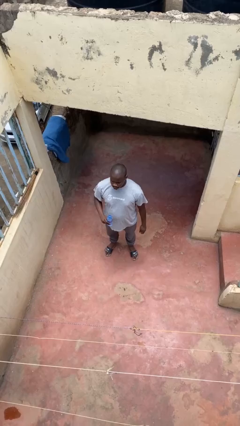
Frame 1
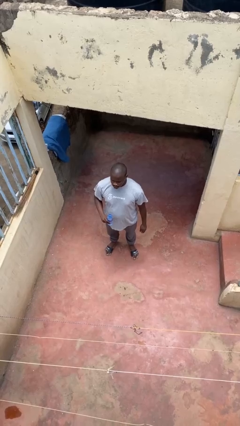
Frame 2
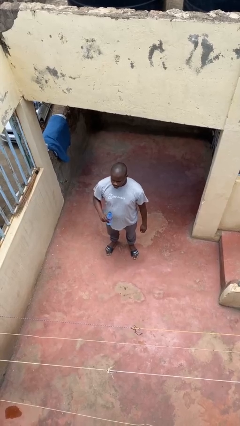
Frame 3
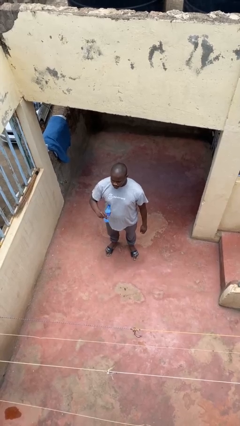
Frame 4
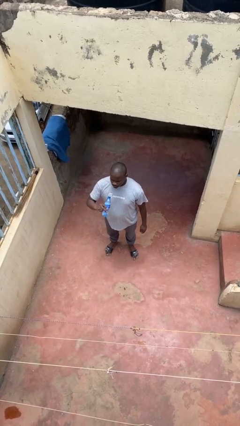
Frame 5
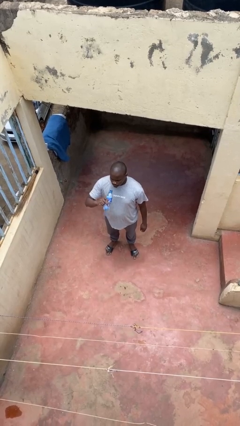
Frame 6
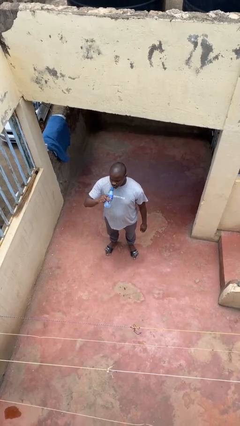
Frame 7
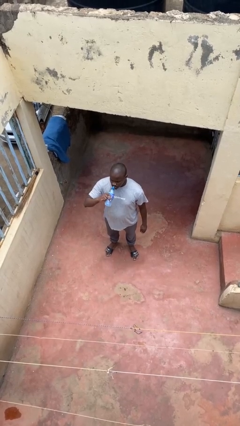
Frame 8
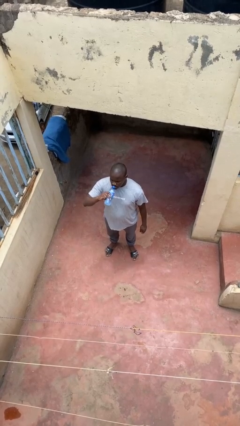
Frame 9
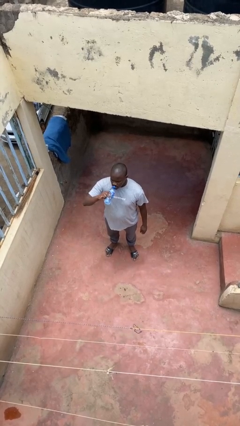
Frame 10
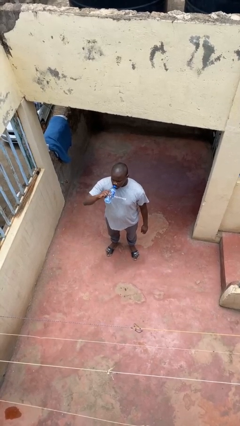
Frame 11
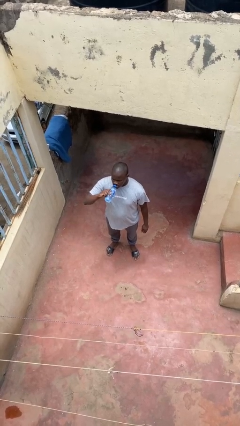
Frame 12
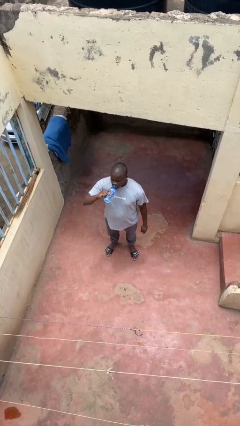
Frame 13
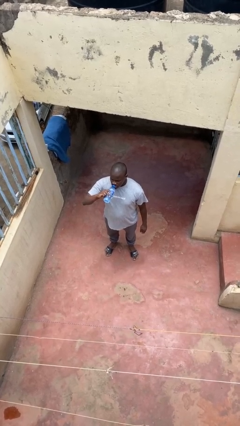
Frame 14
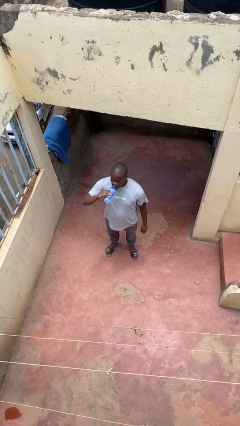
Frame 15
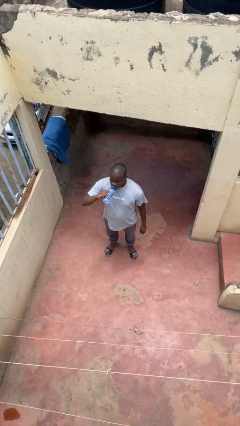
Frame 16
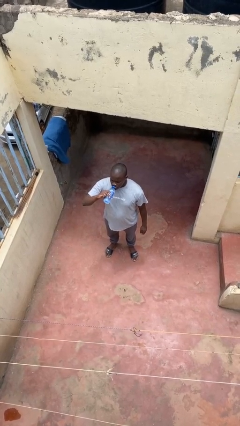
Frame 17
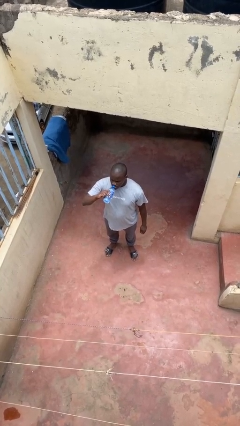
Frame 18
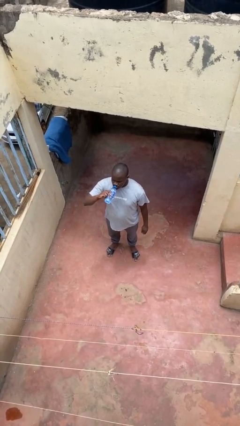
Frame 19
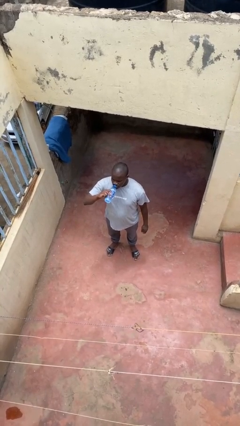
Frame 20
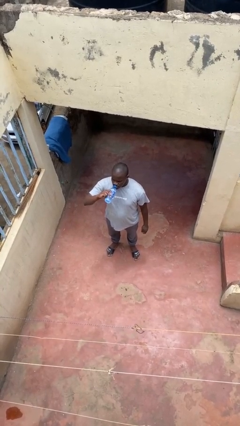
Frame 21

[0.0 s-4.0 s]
person drinks from bottle

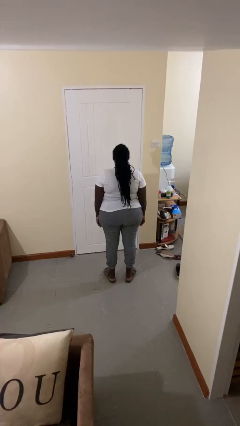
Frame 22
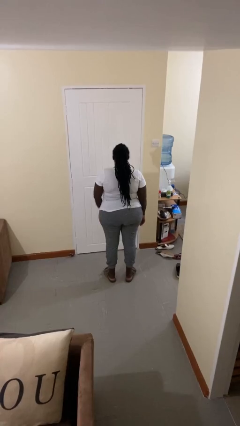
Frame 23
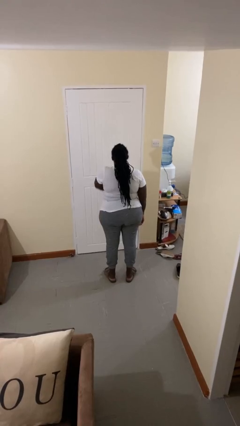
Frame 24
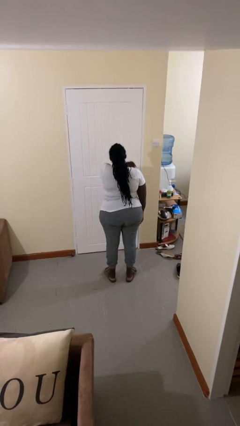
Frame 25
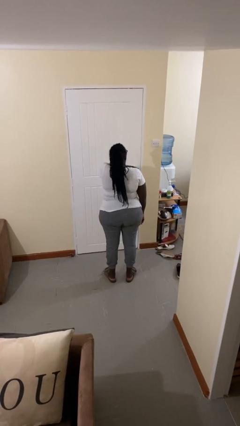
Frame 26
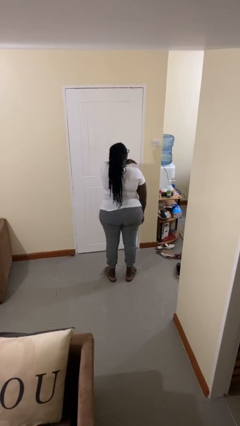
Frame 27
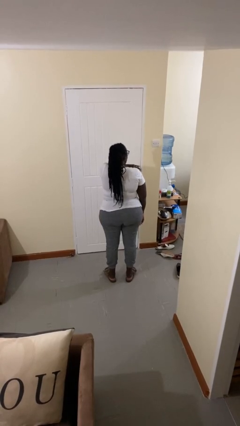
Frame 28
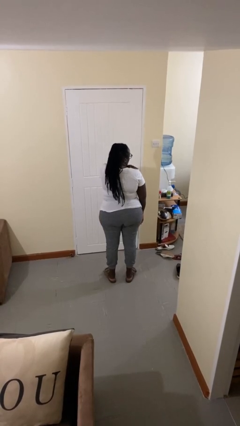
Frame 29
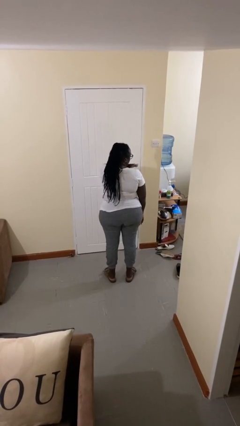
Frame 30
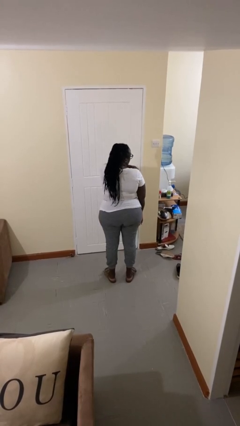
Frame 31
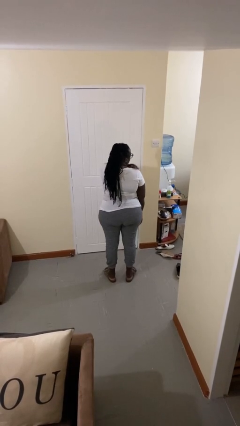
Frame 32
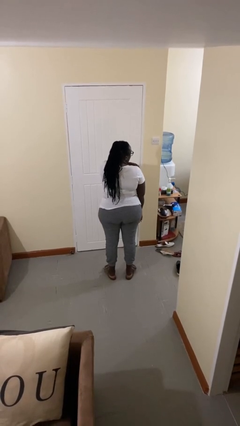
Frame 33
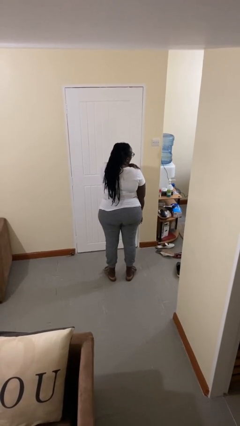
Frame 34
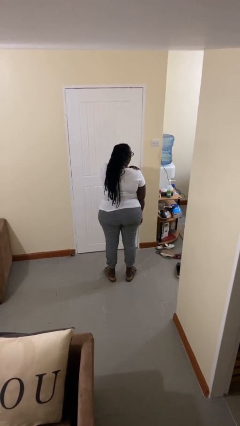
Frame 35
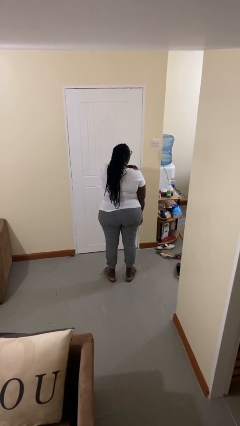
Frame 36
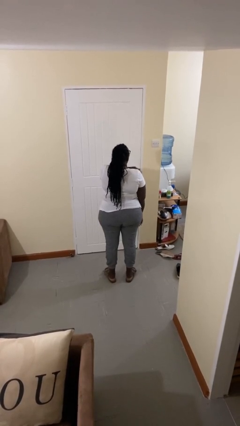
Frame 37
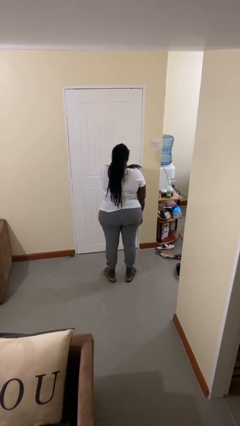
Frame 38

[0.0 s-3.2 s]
person swats bug

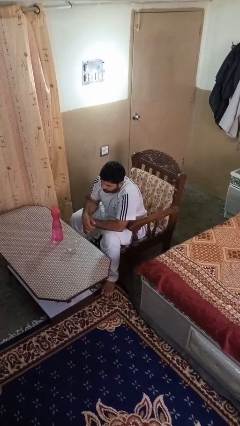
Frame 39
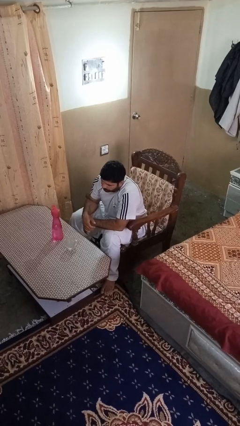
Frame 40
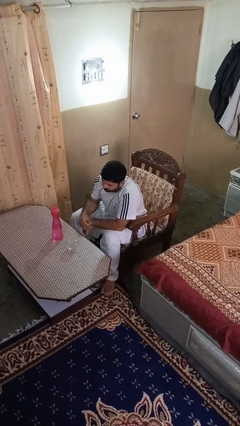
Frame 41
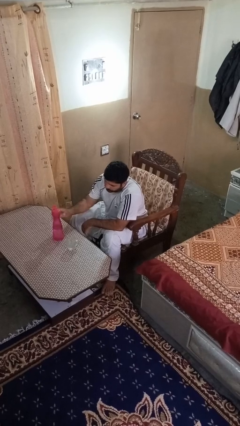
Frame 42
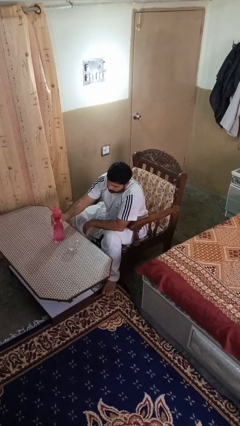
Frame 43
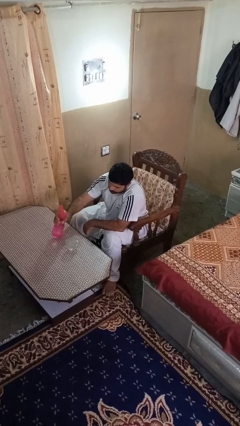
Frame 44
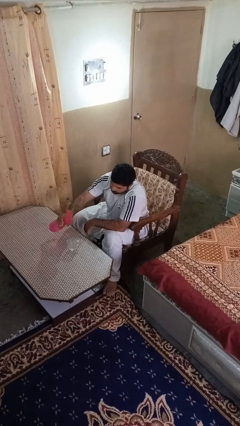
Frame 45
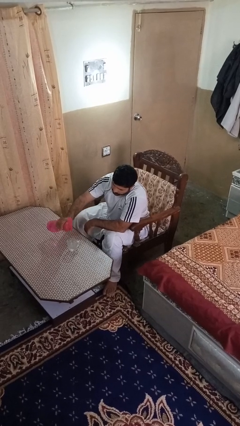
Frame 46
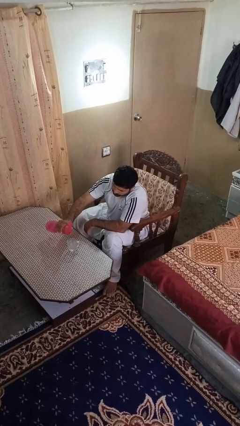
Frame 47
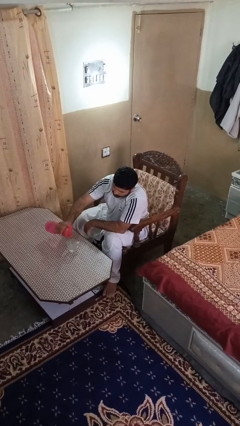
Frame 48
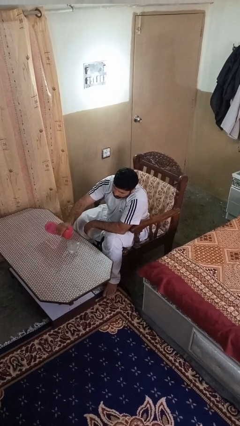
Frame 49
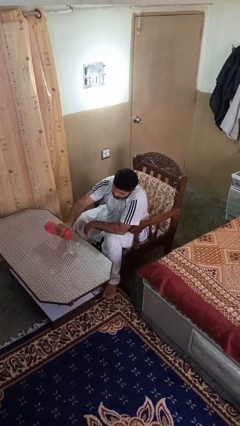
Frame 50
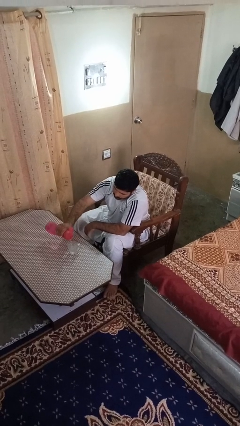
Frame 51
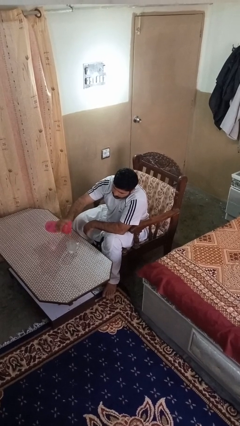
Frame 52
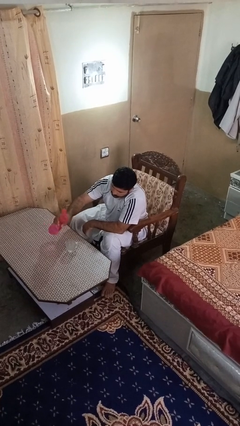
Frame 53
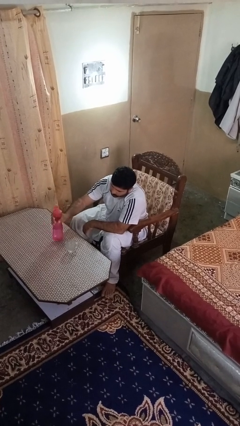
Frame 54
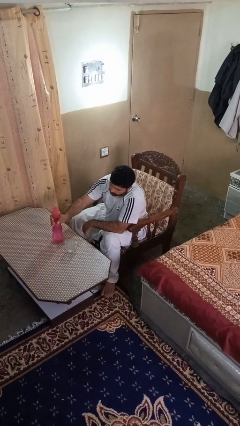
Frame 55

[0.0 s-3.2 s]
person pours liquid into cup

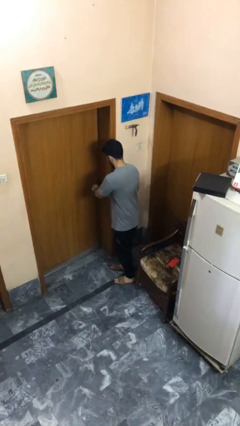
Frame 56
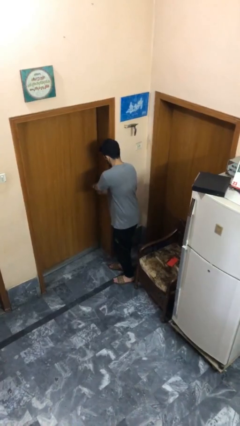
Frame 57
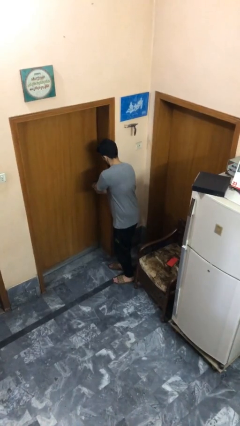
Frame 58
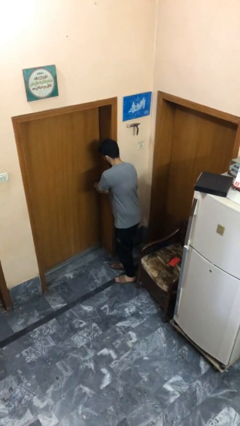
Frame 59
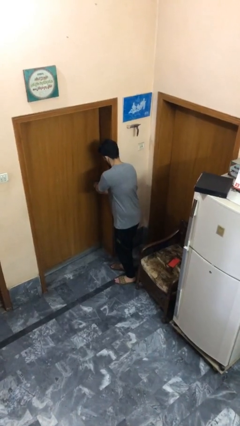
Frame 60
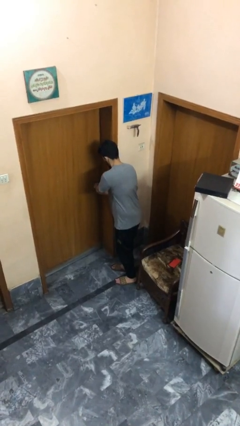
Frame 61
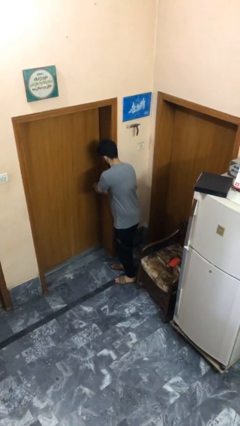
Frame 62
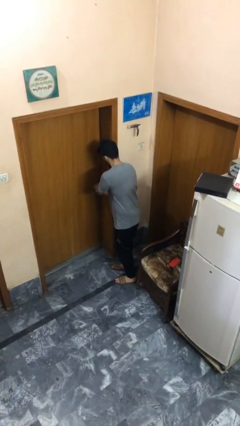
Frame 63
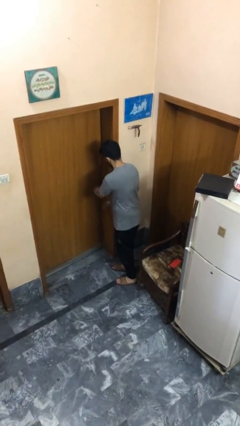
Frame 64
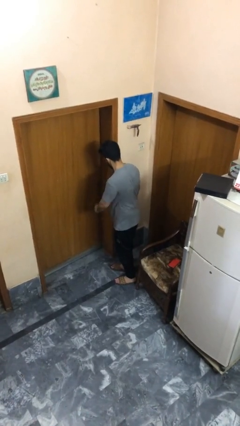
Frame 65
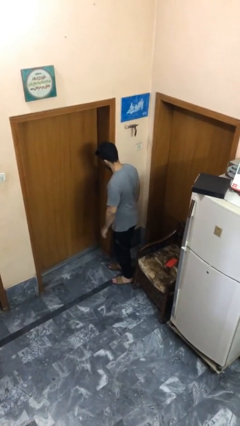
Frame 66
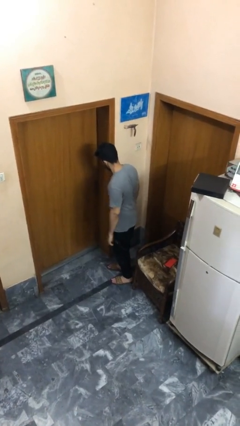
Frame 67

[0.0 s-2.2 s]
person locks door with keys

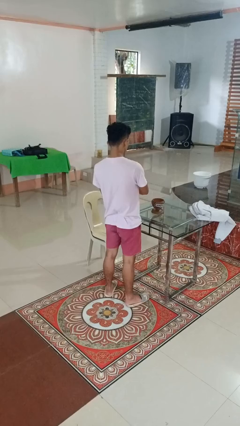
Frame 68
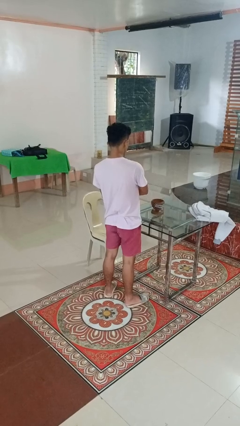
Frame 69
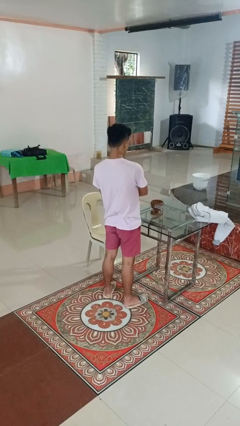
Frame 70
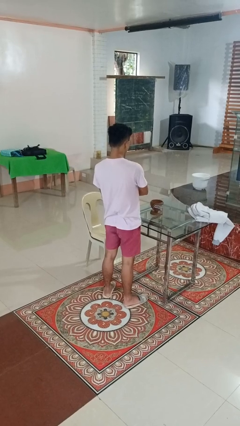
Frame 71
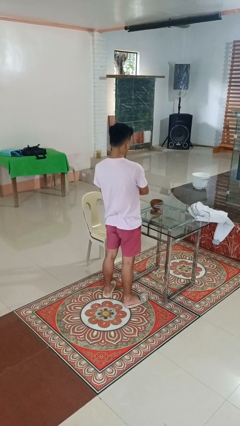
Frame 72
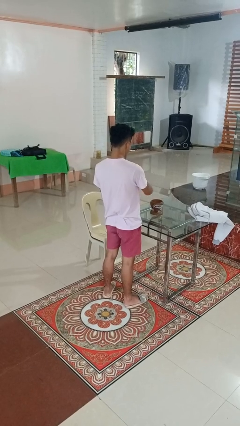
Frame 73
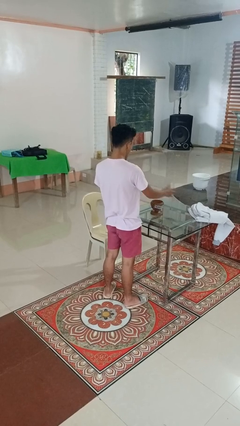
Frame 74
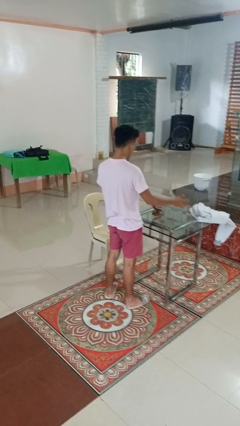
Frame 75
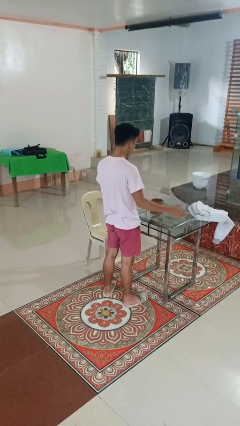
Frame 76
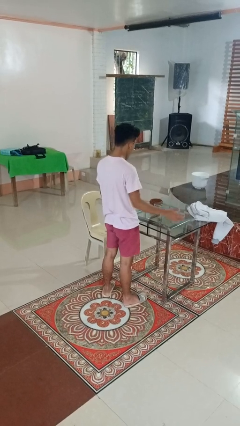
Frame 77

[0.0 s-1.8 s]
person waves hand over object

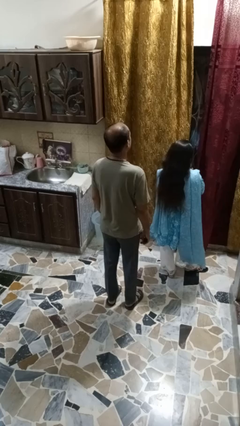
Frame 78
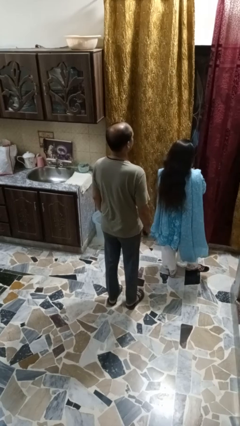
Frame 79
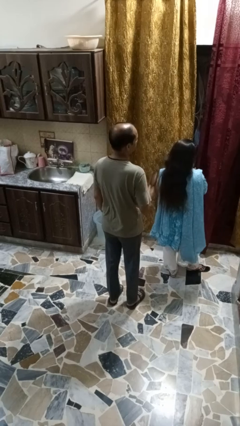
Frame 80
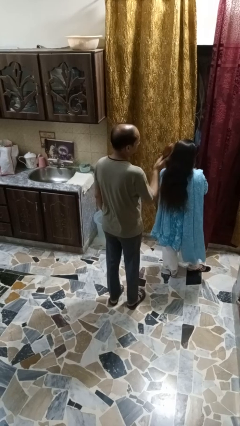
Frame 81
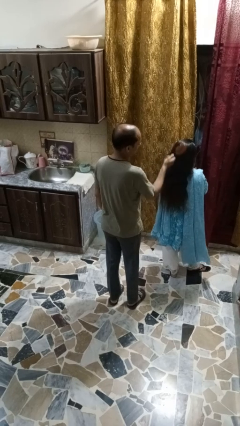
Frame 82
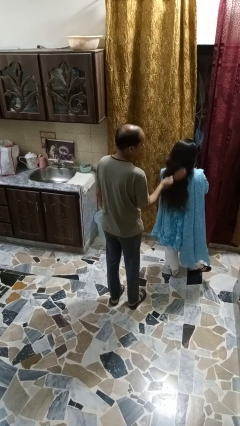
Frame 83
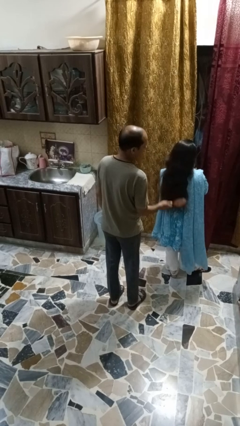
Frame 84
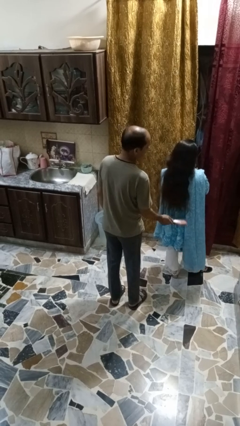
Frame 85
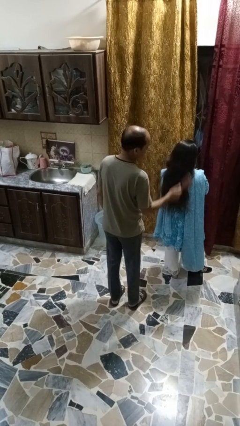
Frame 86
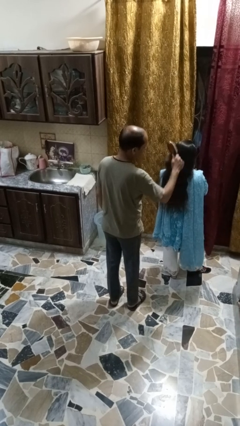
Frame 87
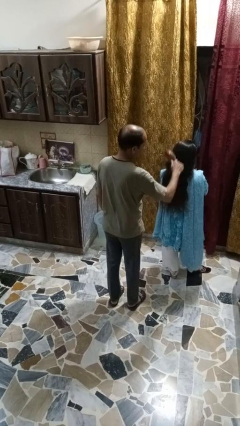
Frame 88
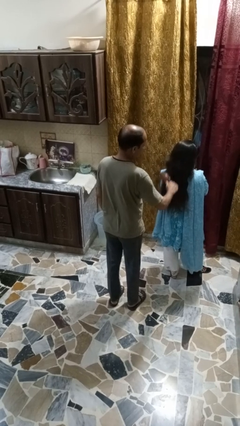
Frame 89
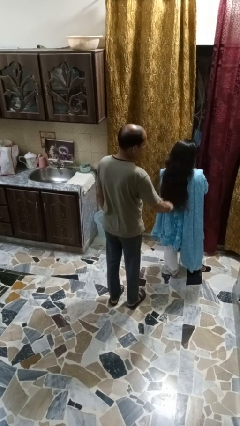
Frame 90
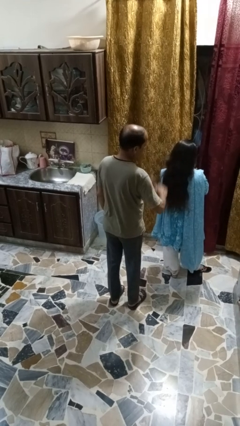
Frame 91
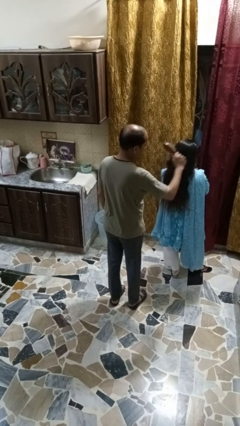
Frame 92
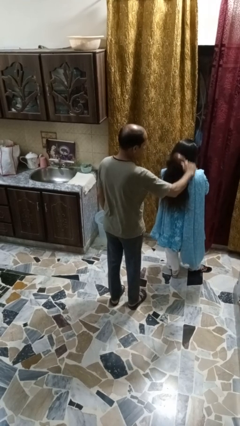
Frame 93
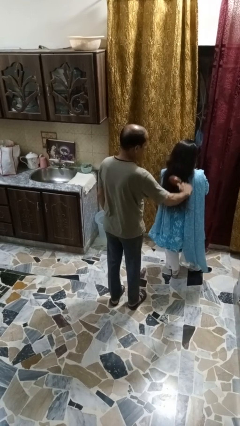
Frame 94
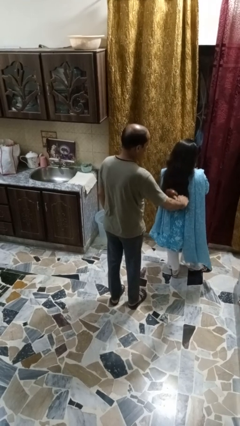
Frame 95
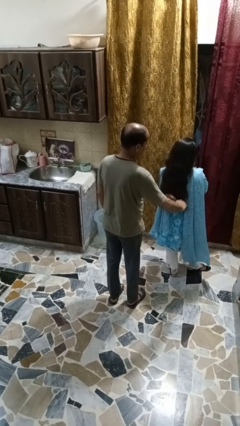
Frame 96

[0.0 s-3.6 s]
person brushes hair of person
